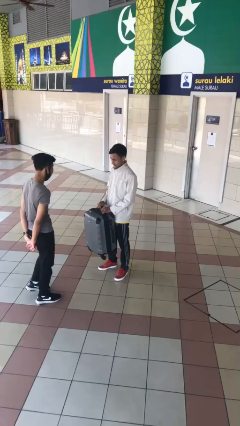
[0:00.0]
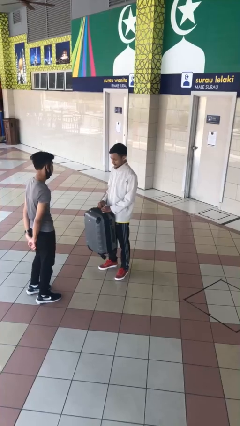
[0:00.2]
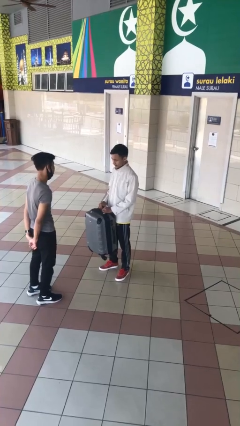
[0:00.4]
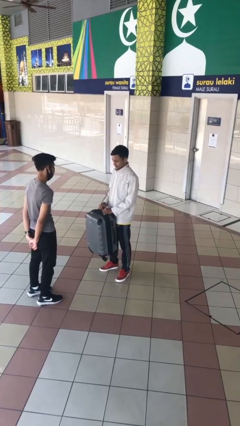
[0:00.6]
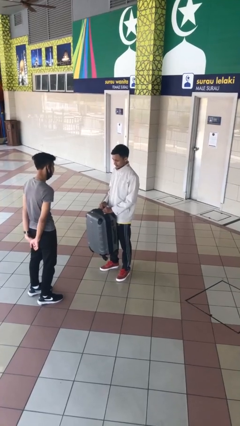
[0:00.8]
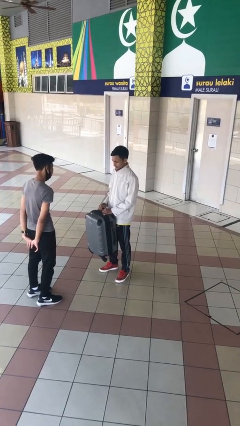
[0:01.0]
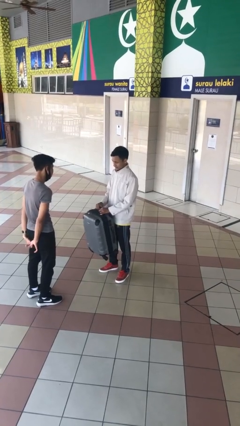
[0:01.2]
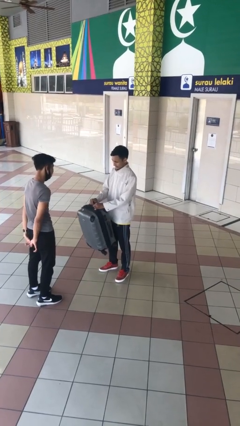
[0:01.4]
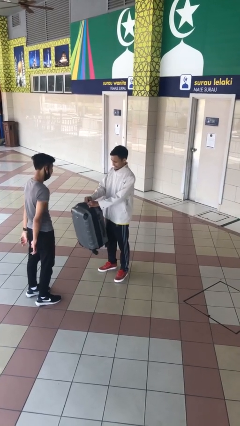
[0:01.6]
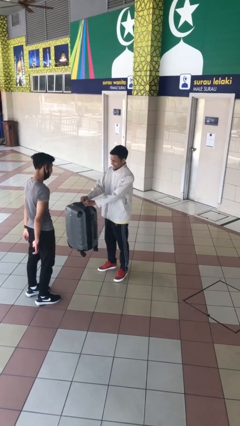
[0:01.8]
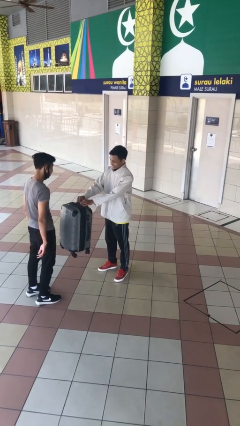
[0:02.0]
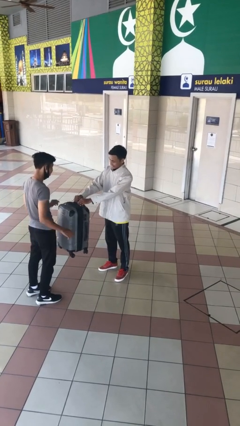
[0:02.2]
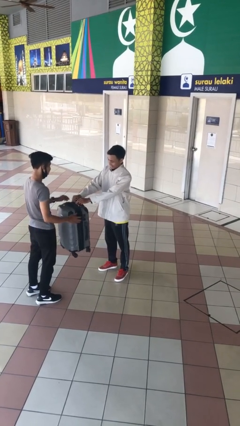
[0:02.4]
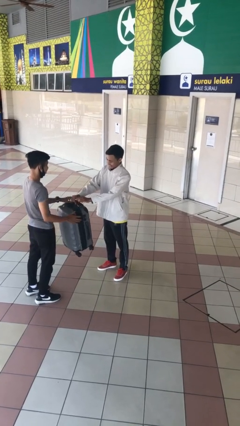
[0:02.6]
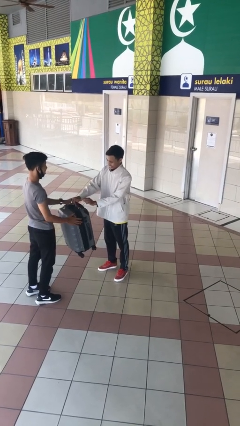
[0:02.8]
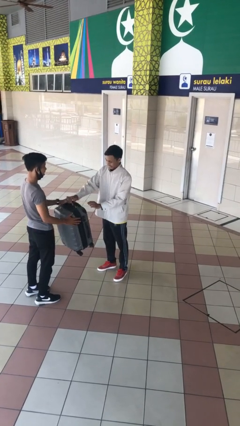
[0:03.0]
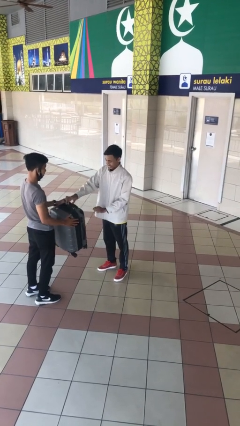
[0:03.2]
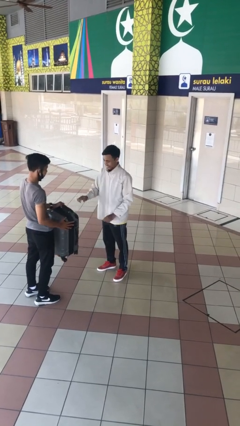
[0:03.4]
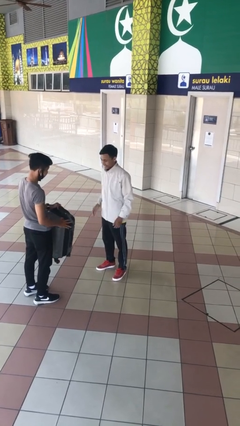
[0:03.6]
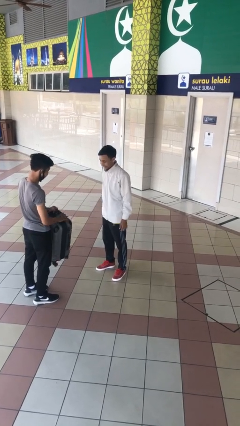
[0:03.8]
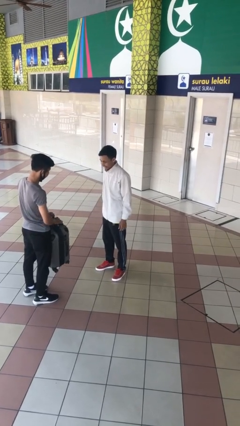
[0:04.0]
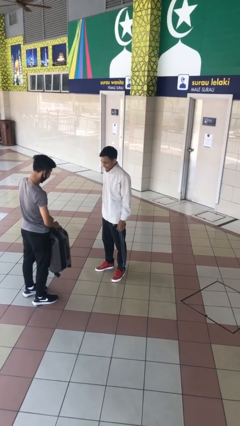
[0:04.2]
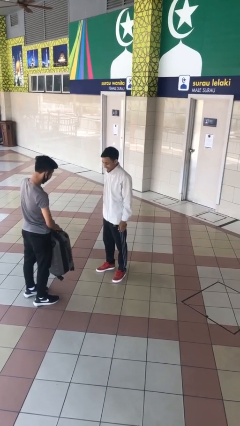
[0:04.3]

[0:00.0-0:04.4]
person transfers object to person

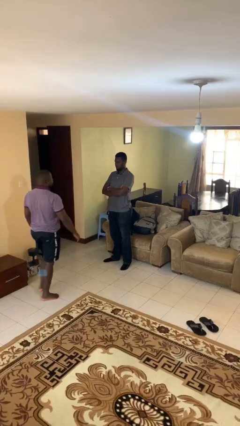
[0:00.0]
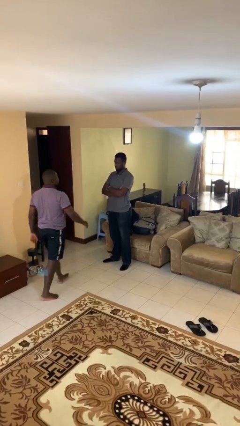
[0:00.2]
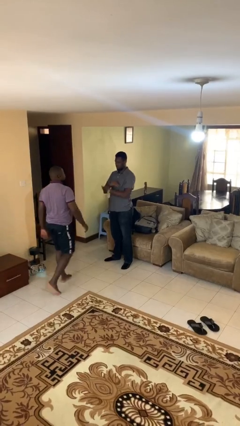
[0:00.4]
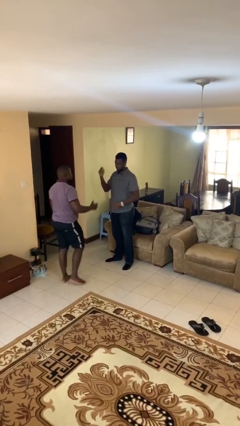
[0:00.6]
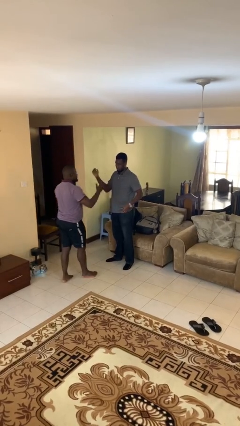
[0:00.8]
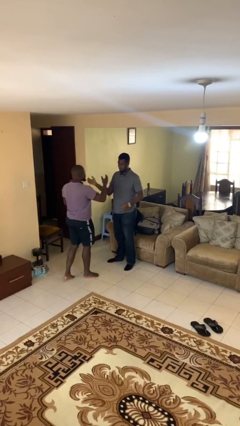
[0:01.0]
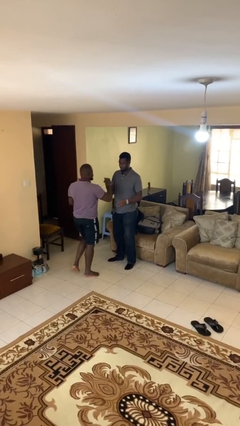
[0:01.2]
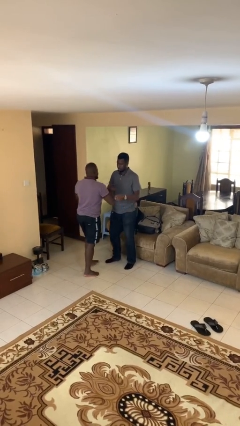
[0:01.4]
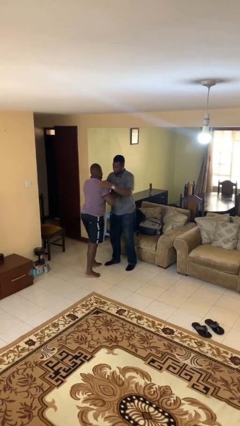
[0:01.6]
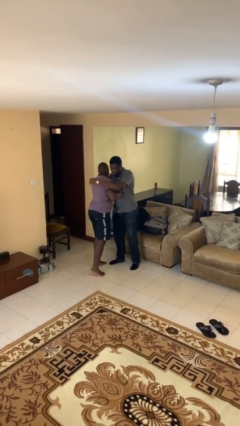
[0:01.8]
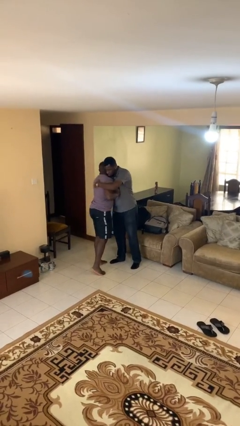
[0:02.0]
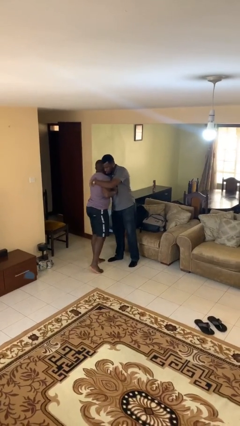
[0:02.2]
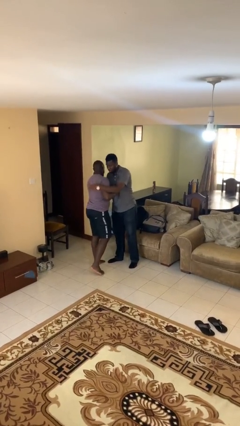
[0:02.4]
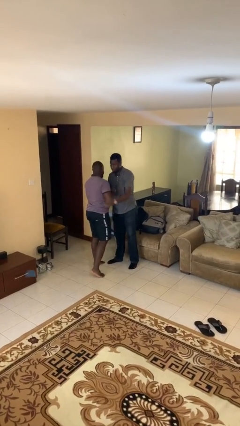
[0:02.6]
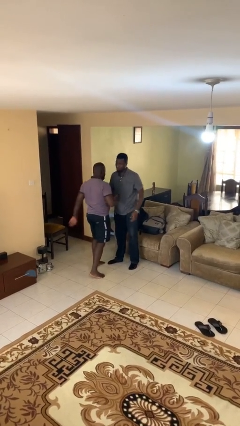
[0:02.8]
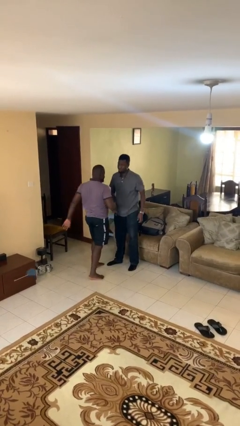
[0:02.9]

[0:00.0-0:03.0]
person embraces person

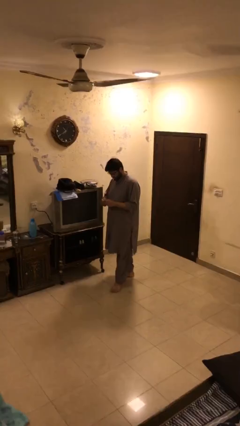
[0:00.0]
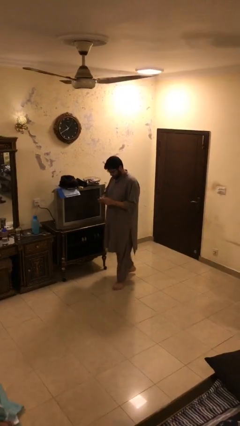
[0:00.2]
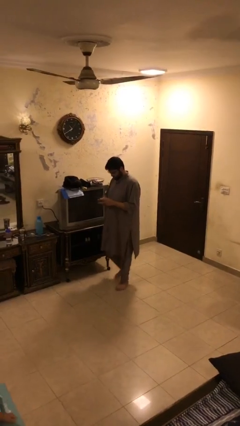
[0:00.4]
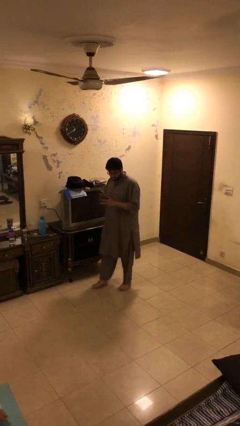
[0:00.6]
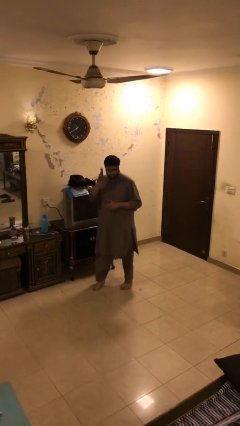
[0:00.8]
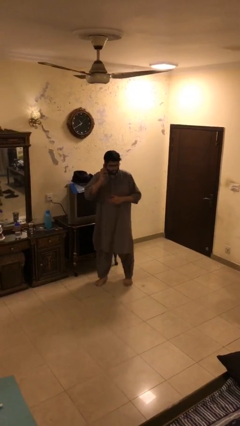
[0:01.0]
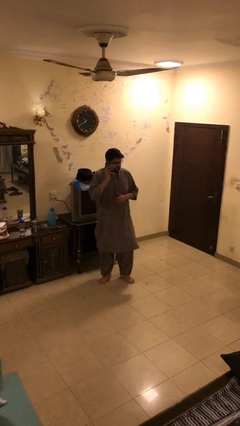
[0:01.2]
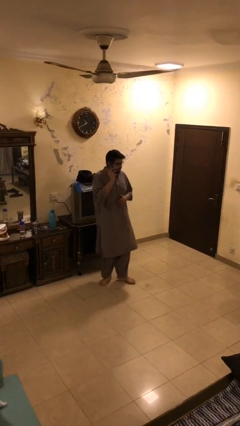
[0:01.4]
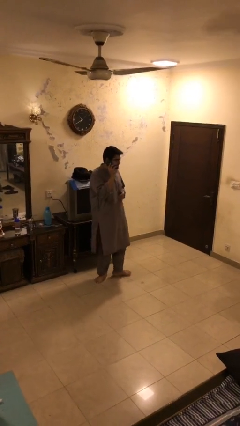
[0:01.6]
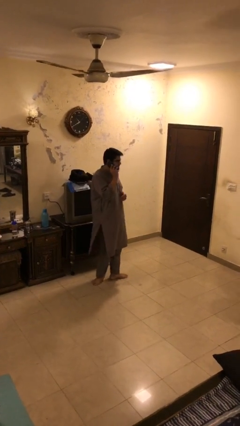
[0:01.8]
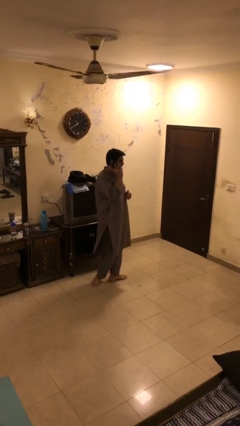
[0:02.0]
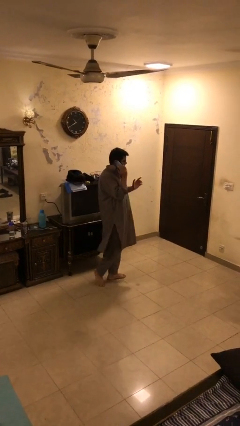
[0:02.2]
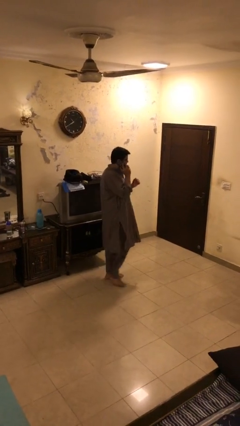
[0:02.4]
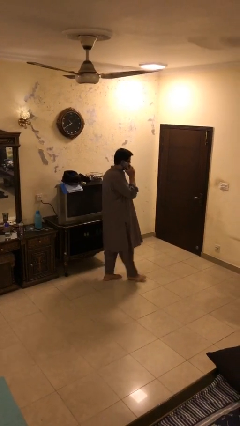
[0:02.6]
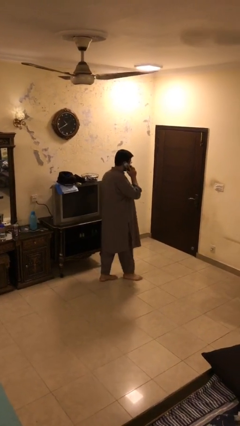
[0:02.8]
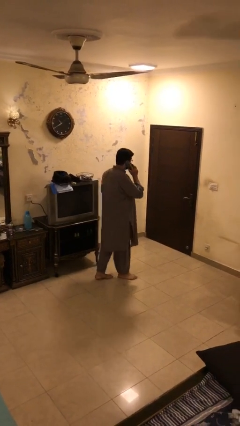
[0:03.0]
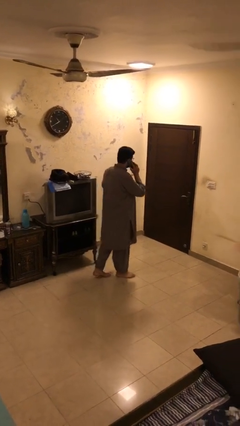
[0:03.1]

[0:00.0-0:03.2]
person talks on phone

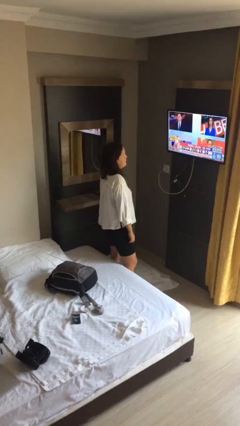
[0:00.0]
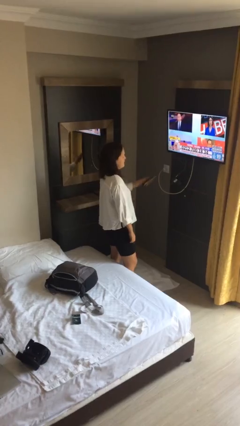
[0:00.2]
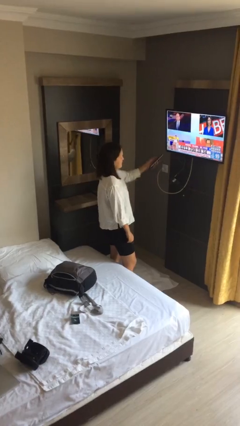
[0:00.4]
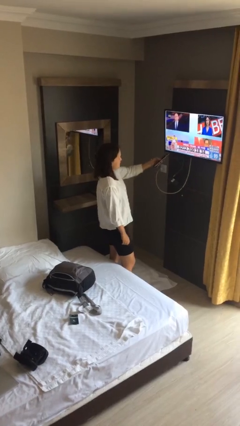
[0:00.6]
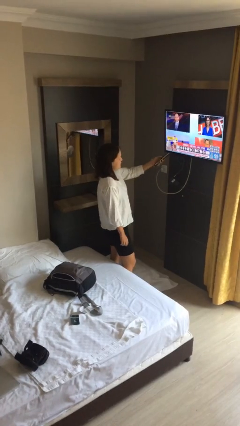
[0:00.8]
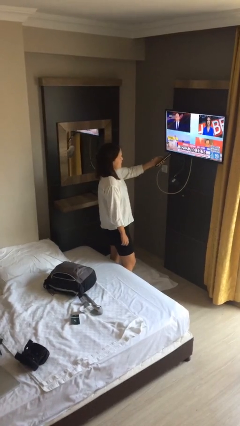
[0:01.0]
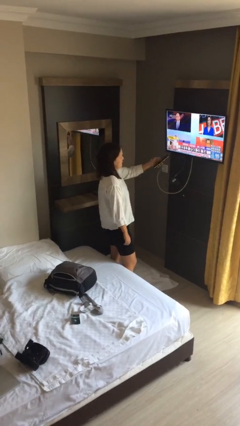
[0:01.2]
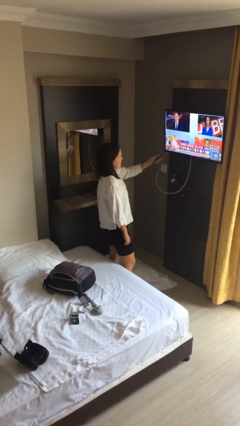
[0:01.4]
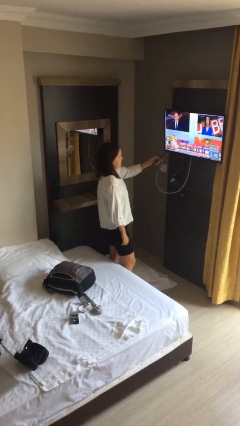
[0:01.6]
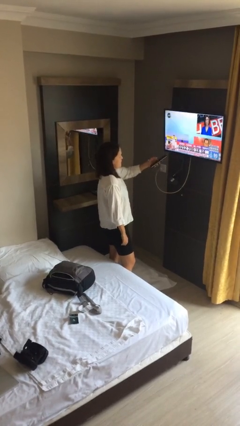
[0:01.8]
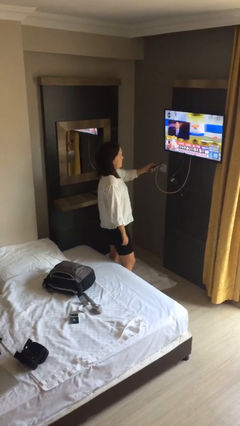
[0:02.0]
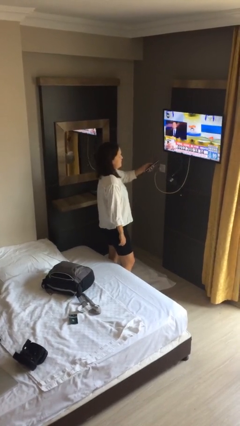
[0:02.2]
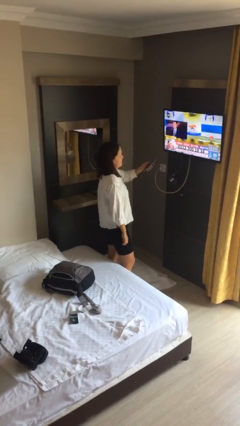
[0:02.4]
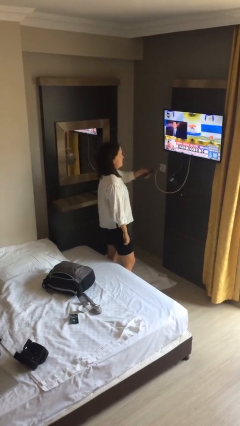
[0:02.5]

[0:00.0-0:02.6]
person uses television remote

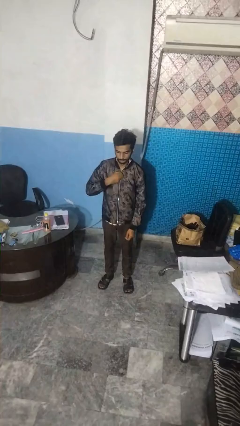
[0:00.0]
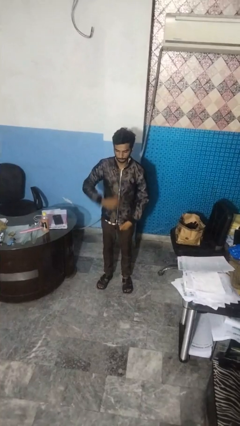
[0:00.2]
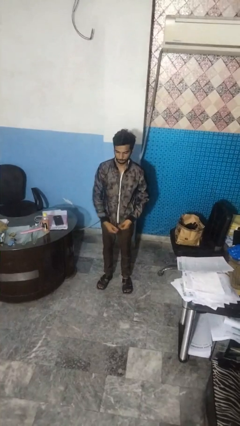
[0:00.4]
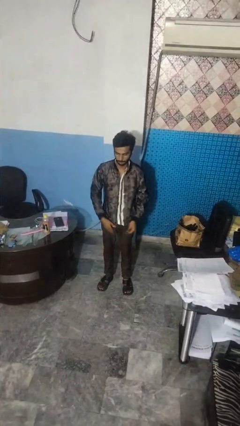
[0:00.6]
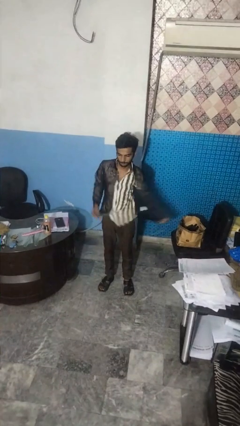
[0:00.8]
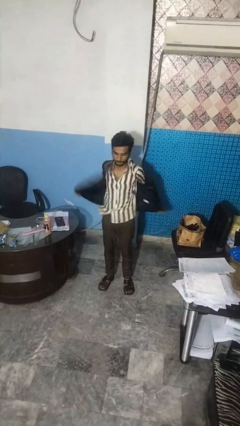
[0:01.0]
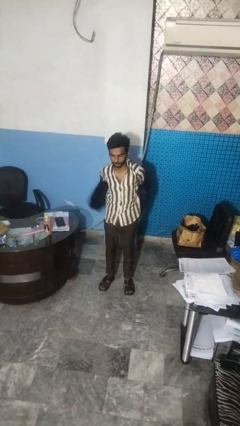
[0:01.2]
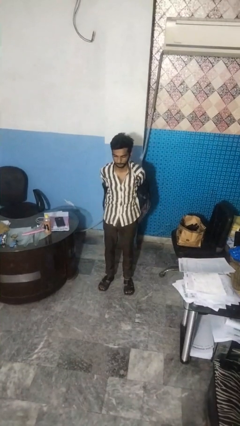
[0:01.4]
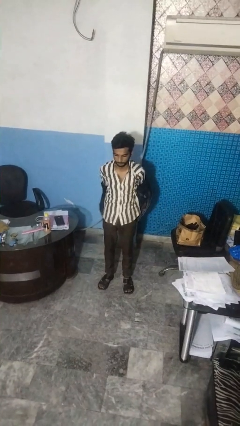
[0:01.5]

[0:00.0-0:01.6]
person unzips jacket

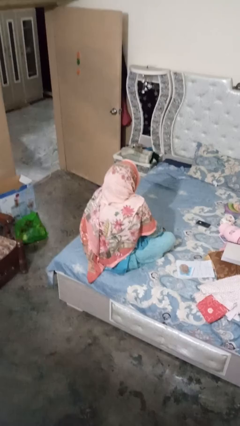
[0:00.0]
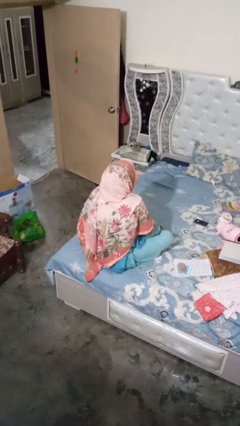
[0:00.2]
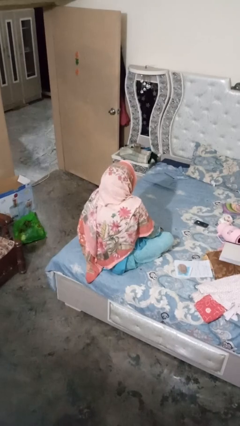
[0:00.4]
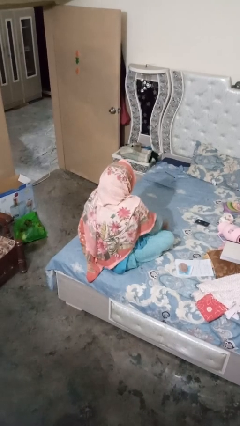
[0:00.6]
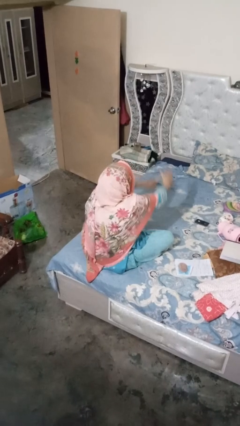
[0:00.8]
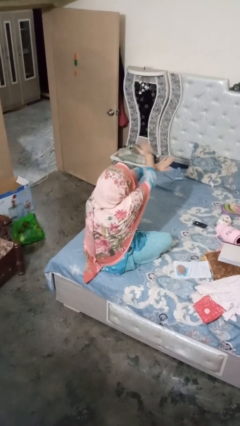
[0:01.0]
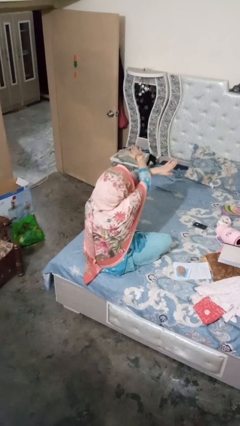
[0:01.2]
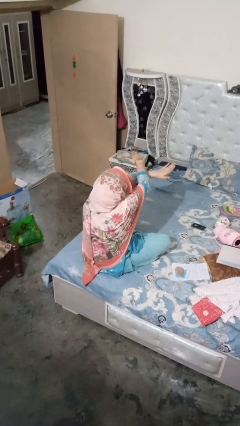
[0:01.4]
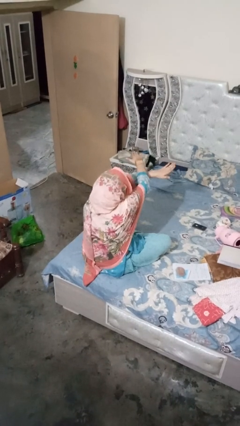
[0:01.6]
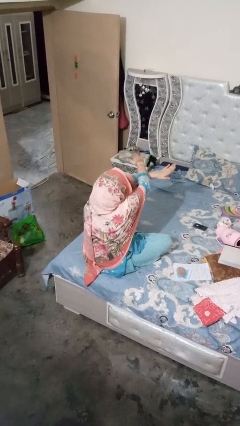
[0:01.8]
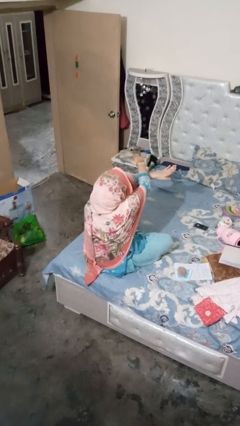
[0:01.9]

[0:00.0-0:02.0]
person gestures arms x

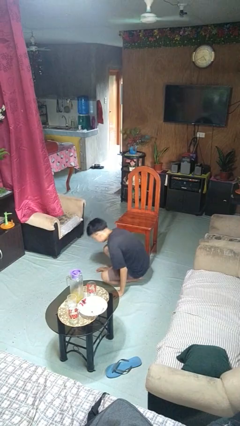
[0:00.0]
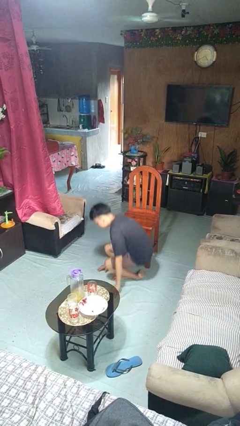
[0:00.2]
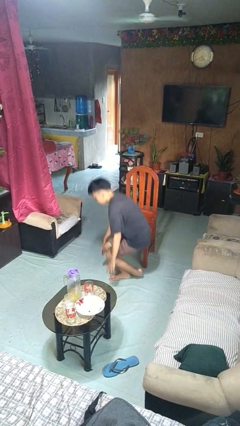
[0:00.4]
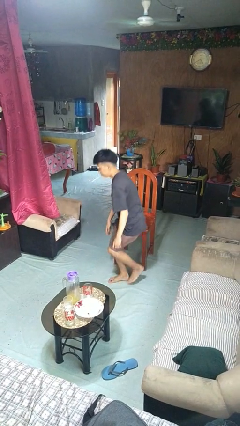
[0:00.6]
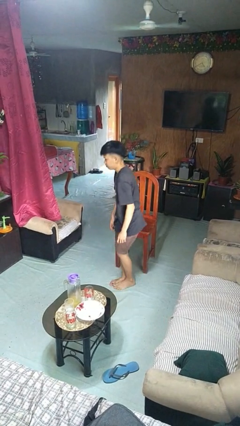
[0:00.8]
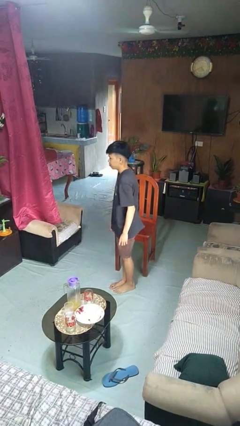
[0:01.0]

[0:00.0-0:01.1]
person stands up from floor
